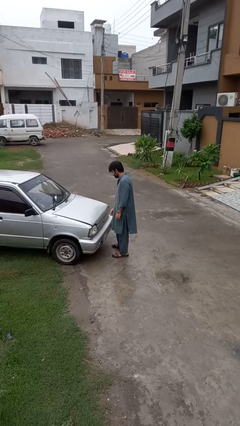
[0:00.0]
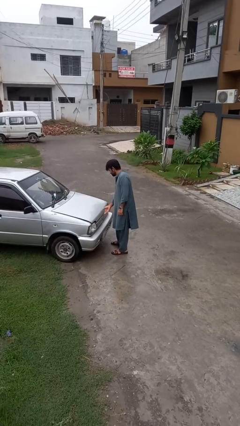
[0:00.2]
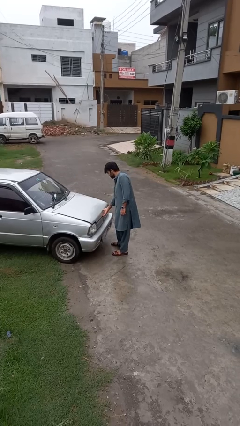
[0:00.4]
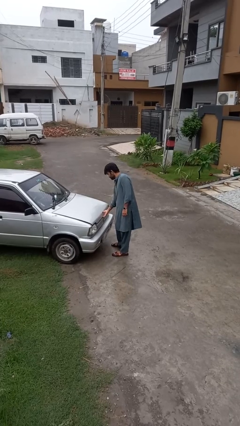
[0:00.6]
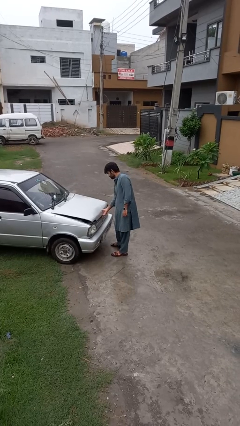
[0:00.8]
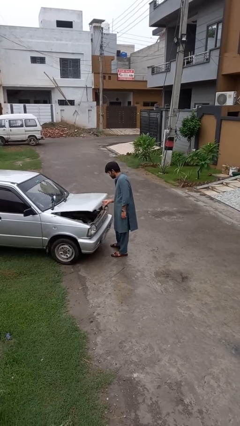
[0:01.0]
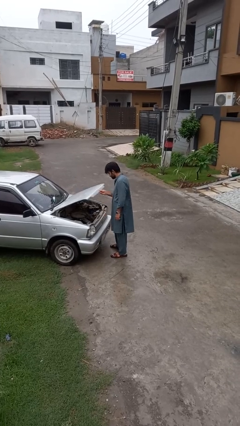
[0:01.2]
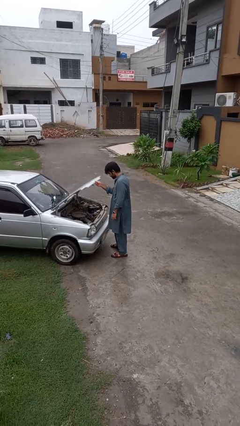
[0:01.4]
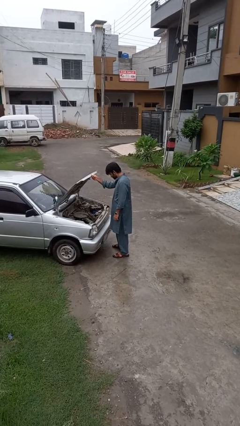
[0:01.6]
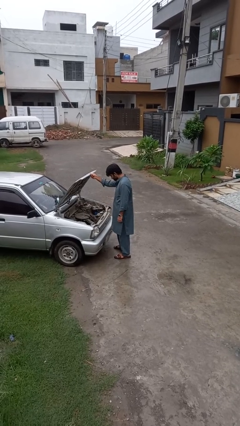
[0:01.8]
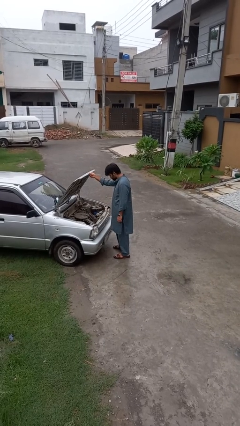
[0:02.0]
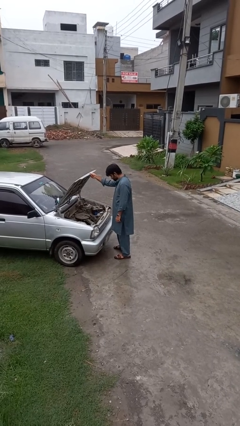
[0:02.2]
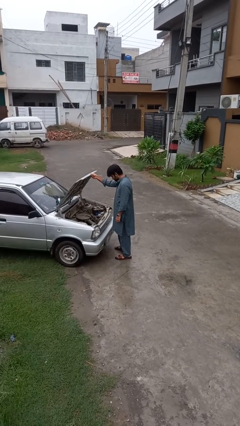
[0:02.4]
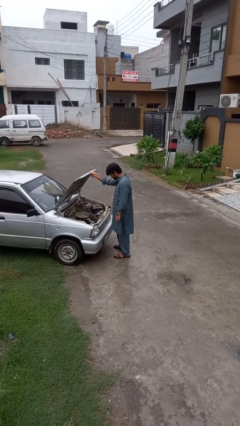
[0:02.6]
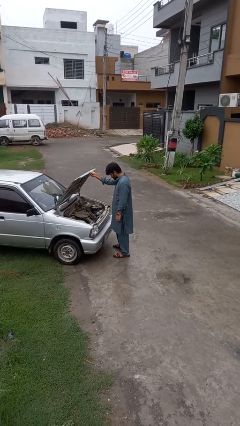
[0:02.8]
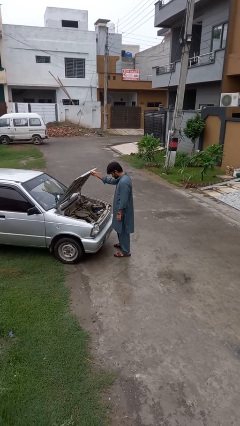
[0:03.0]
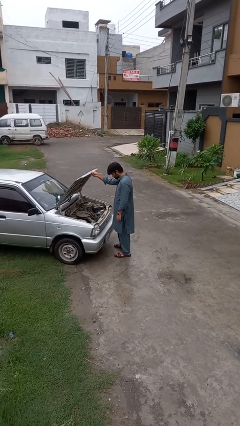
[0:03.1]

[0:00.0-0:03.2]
person opens car hood

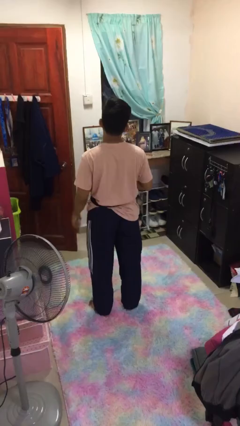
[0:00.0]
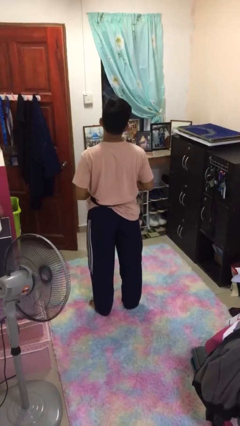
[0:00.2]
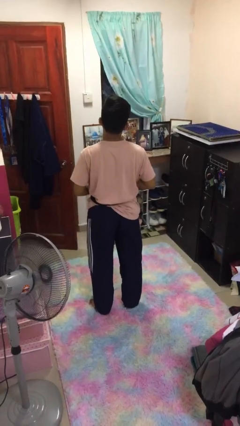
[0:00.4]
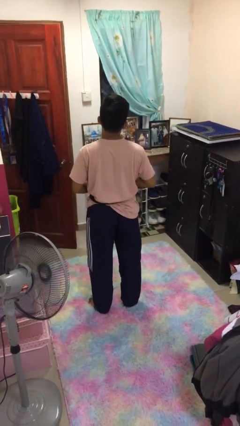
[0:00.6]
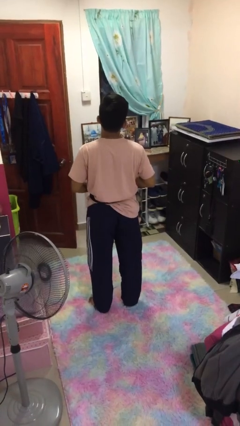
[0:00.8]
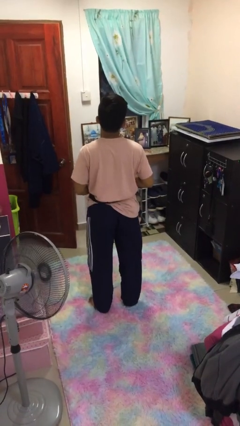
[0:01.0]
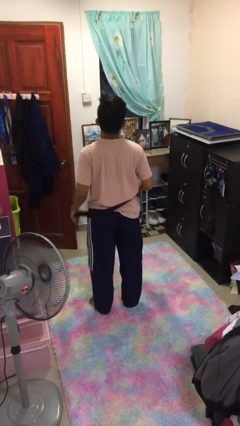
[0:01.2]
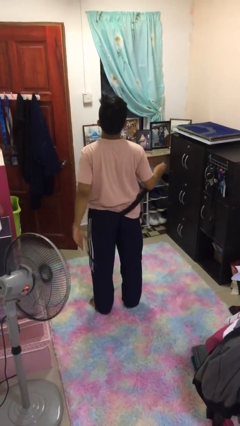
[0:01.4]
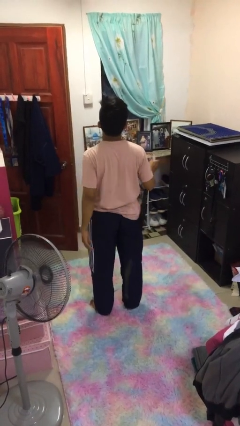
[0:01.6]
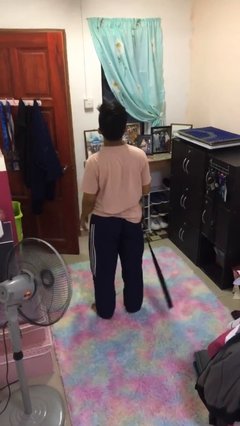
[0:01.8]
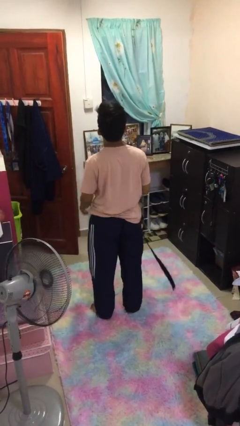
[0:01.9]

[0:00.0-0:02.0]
person takes off belt

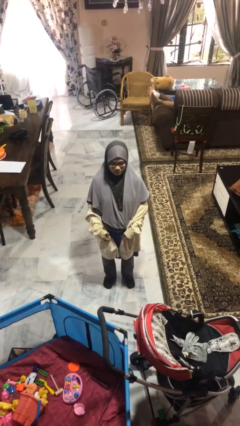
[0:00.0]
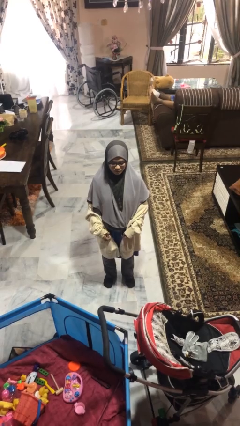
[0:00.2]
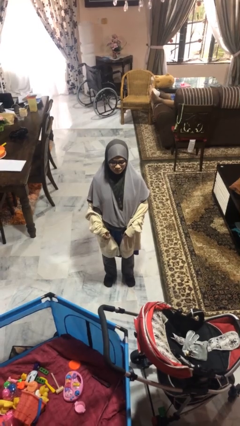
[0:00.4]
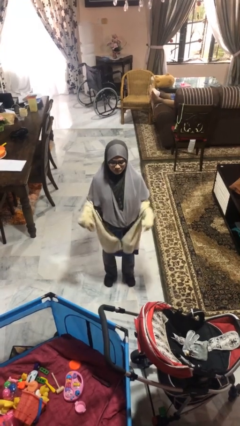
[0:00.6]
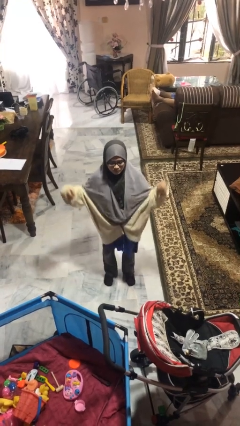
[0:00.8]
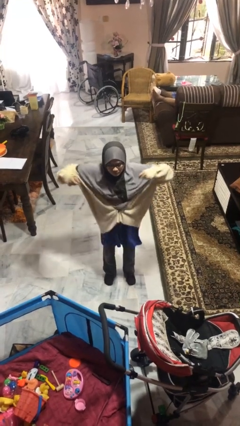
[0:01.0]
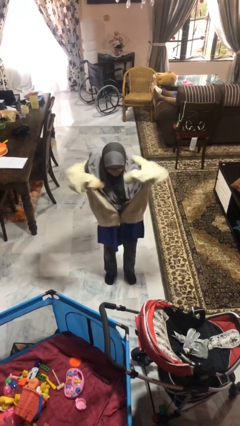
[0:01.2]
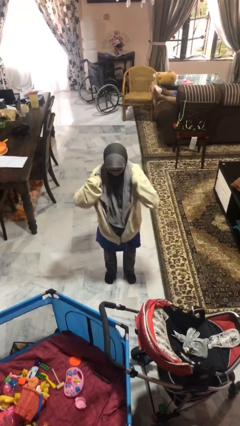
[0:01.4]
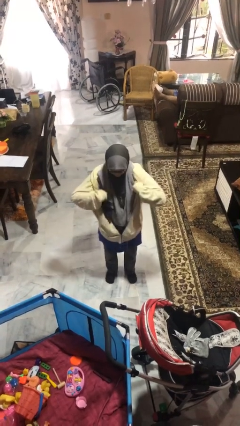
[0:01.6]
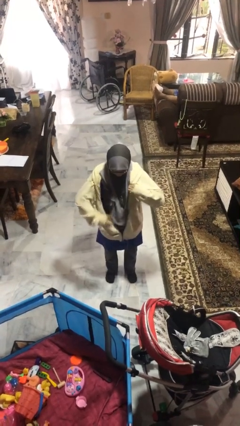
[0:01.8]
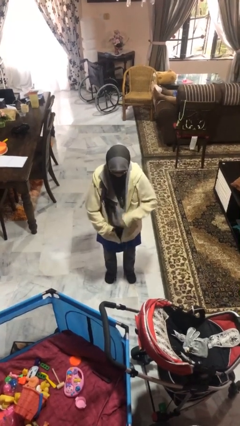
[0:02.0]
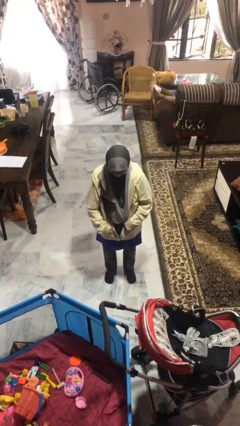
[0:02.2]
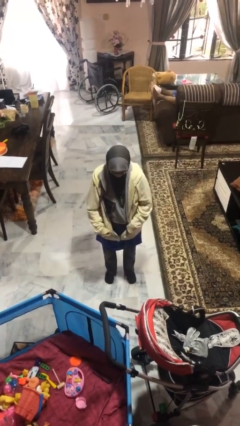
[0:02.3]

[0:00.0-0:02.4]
person puts on jacket

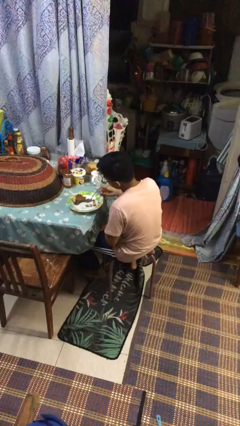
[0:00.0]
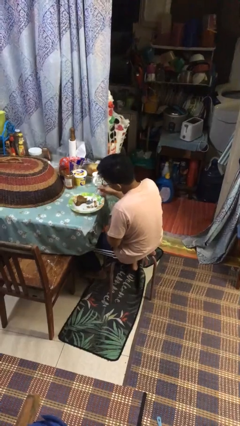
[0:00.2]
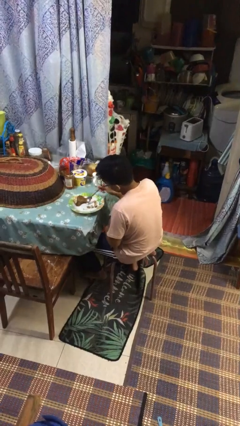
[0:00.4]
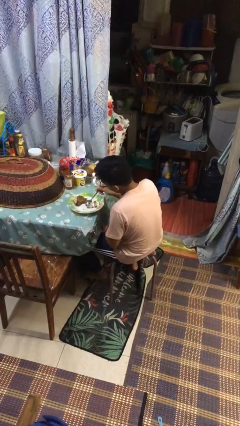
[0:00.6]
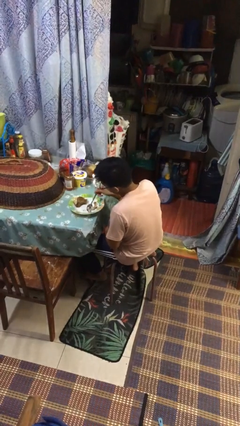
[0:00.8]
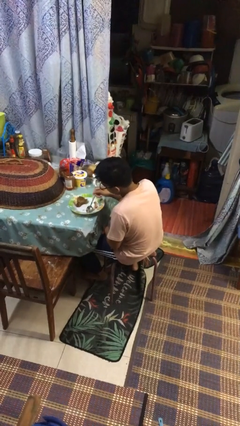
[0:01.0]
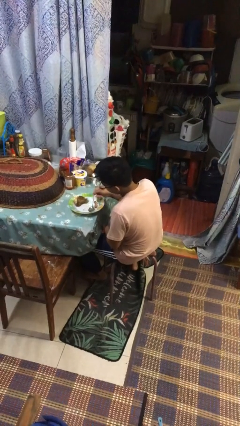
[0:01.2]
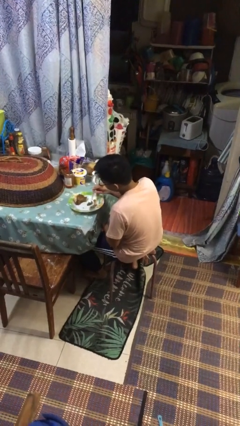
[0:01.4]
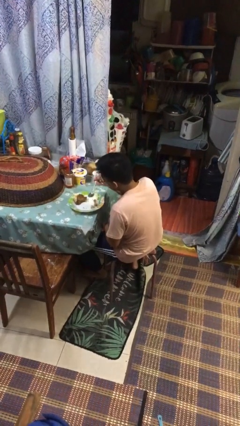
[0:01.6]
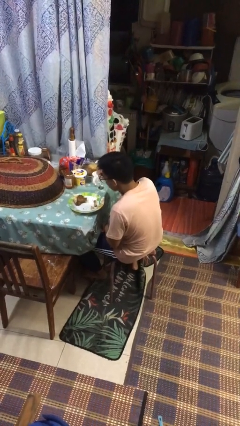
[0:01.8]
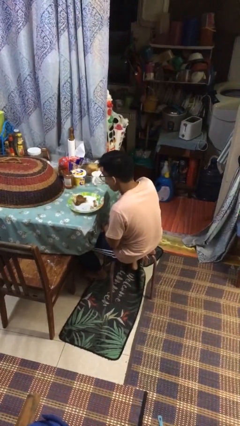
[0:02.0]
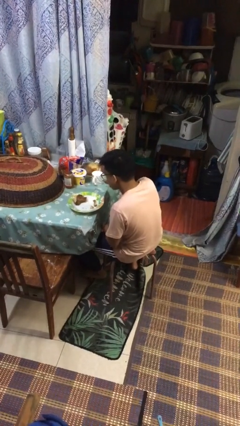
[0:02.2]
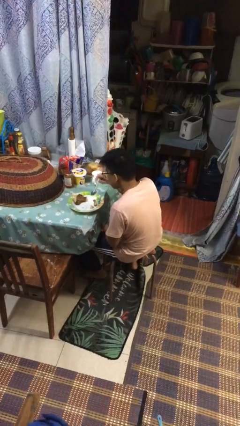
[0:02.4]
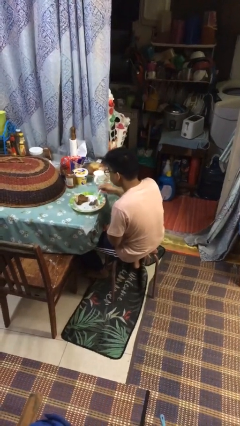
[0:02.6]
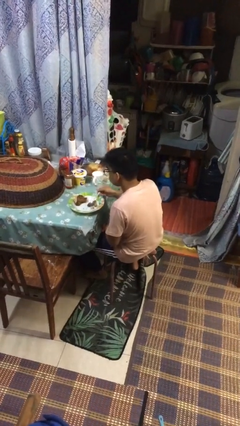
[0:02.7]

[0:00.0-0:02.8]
person eats with utensil

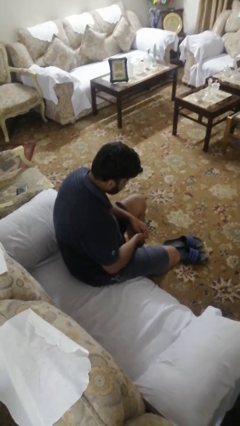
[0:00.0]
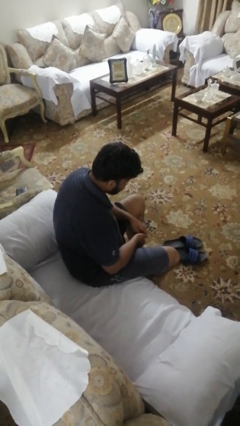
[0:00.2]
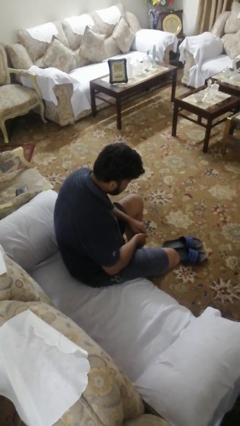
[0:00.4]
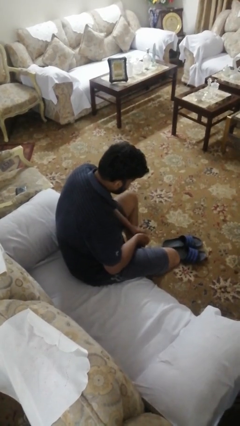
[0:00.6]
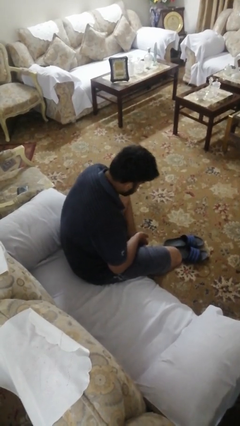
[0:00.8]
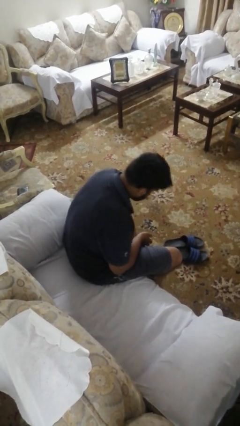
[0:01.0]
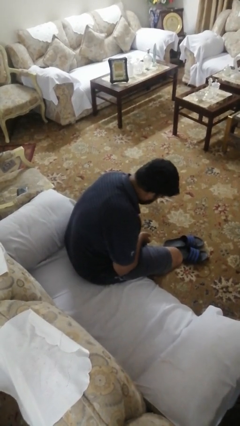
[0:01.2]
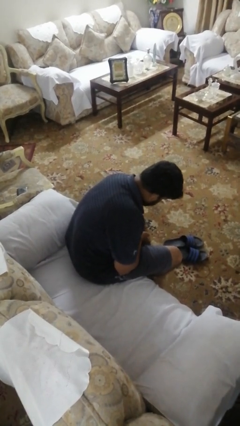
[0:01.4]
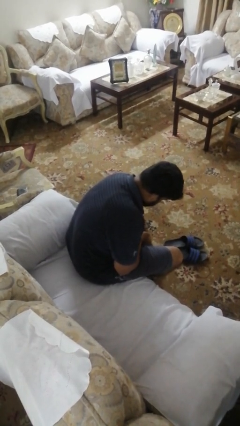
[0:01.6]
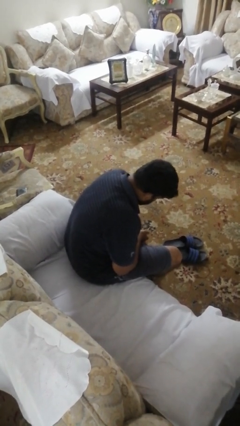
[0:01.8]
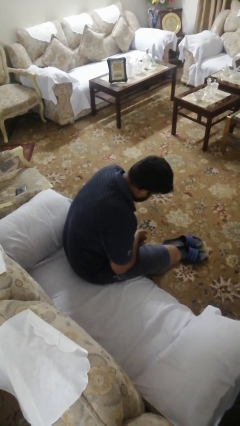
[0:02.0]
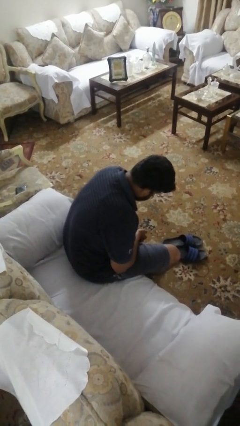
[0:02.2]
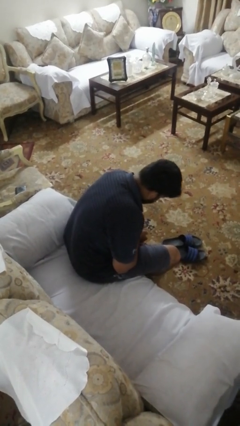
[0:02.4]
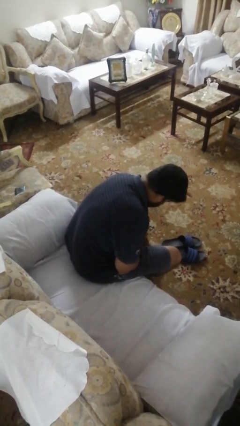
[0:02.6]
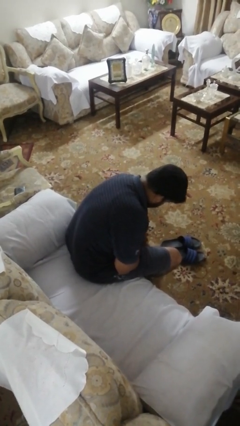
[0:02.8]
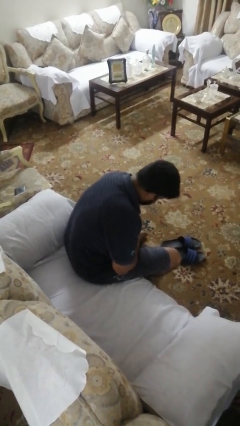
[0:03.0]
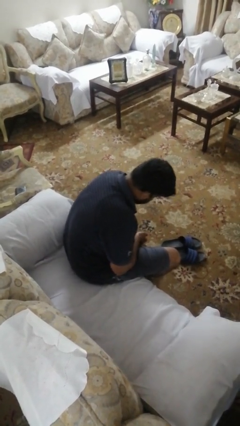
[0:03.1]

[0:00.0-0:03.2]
person rubs foot

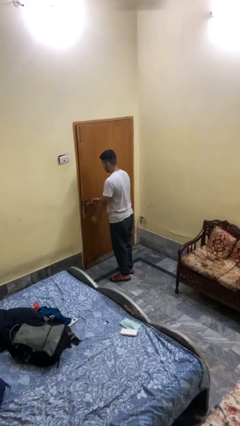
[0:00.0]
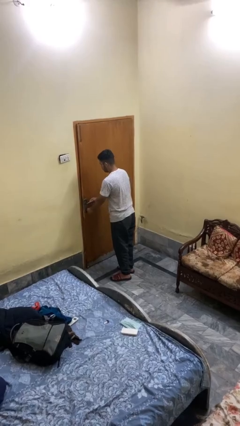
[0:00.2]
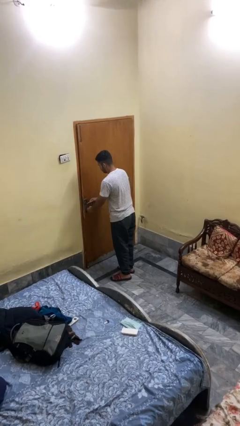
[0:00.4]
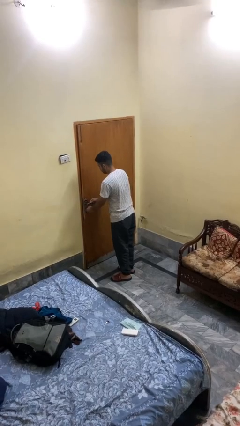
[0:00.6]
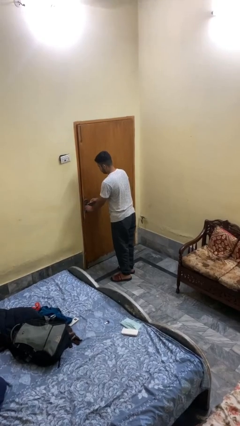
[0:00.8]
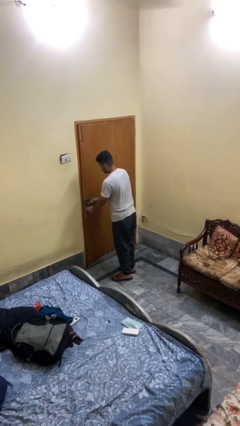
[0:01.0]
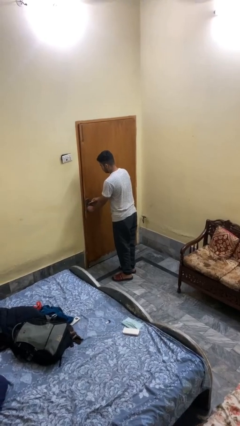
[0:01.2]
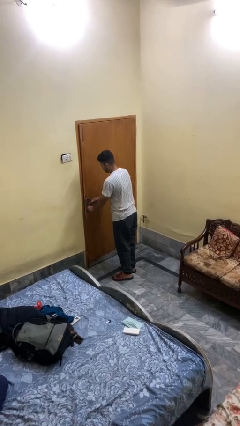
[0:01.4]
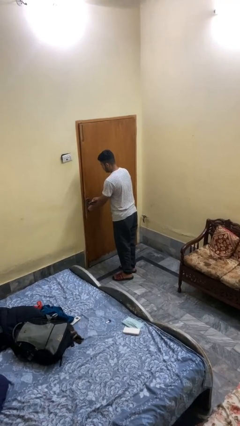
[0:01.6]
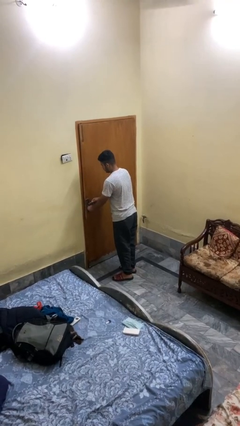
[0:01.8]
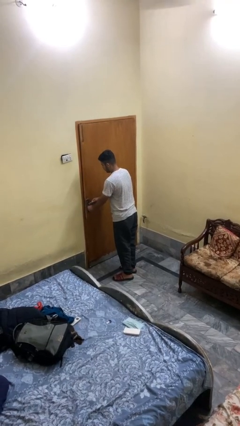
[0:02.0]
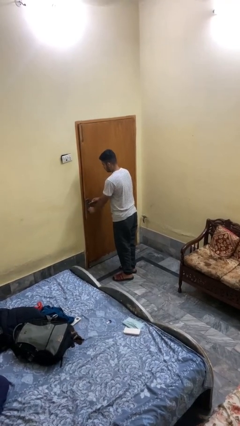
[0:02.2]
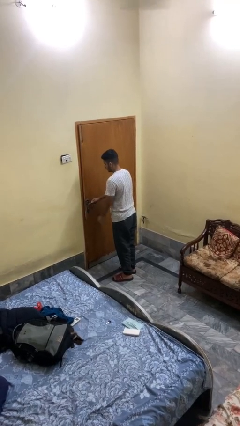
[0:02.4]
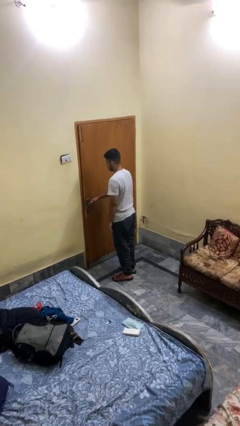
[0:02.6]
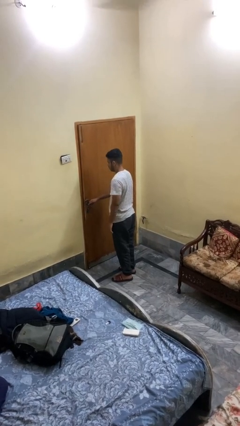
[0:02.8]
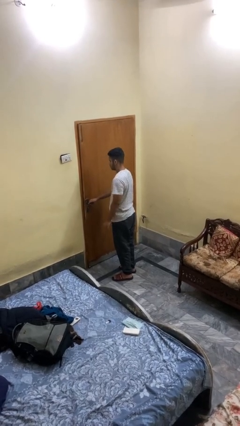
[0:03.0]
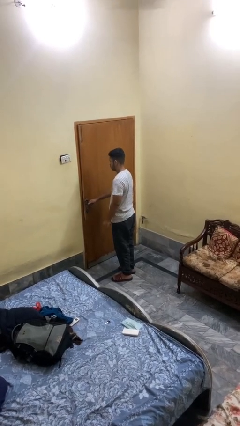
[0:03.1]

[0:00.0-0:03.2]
person unlocks door with keys

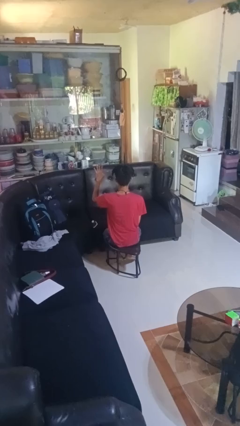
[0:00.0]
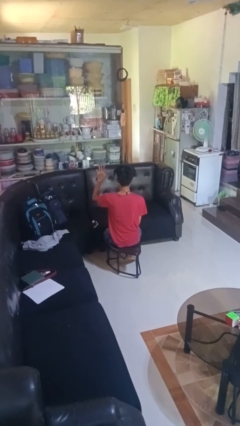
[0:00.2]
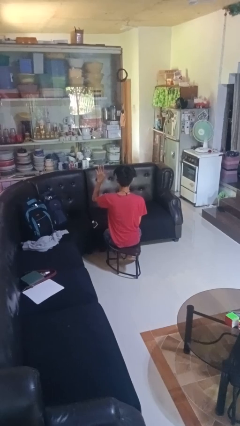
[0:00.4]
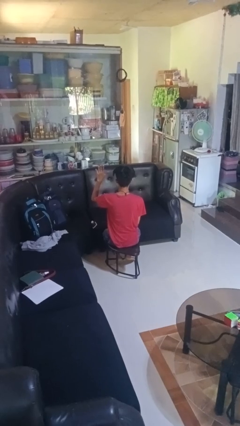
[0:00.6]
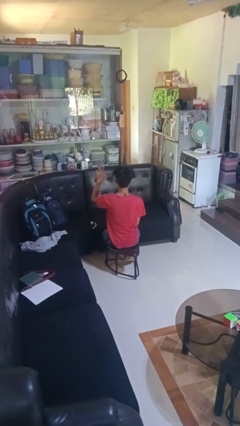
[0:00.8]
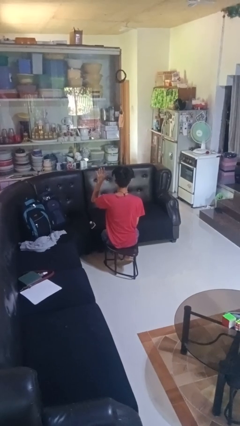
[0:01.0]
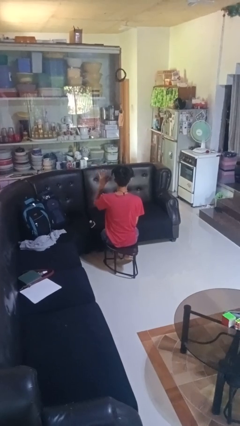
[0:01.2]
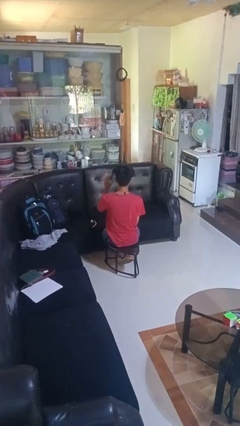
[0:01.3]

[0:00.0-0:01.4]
person gestures number five
